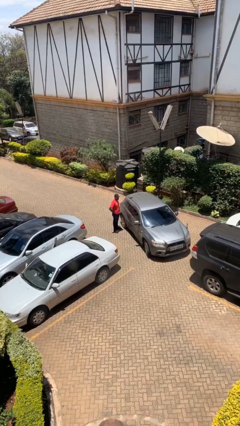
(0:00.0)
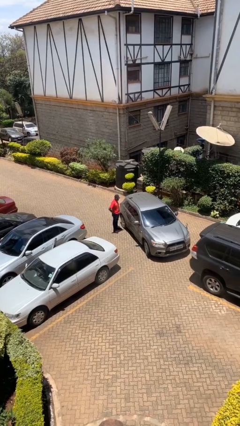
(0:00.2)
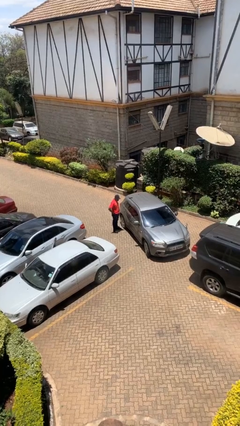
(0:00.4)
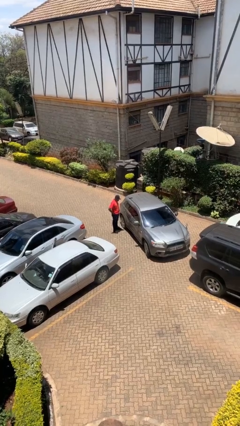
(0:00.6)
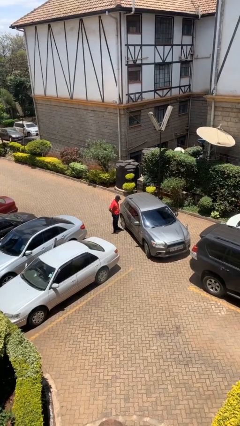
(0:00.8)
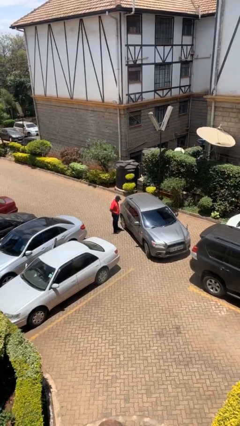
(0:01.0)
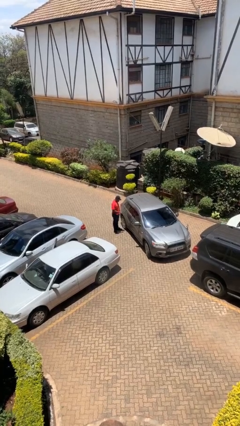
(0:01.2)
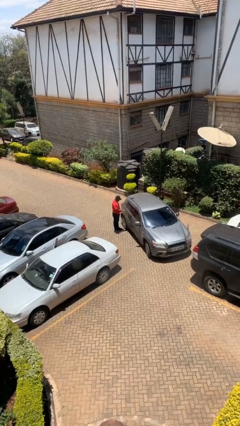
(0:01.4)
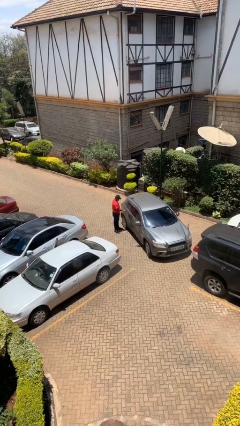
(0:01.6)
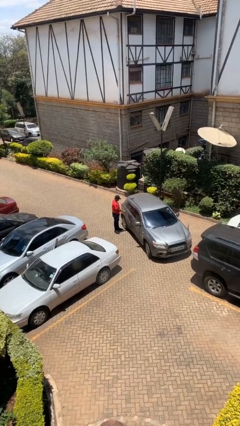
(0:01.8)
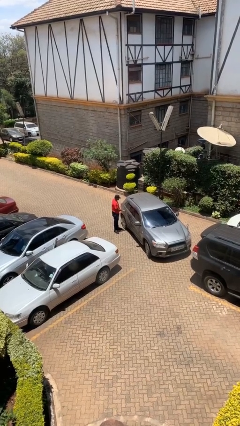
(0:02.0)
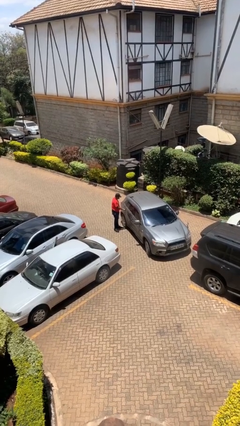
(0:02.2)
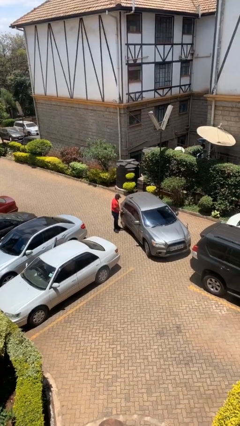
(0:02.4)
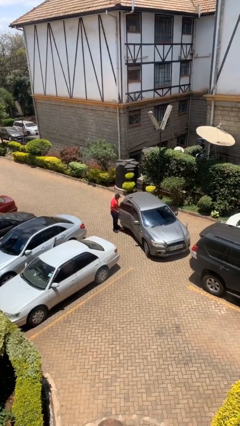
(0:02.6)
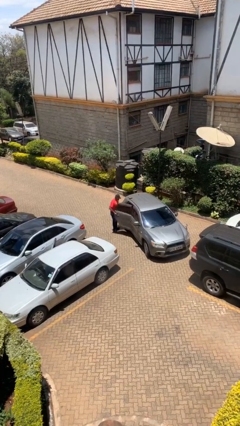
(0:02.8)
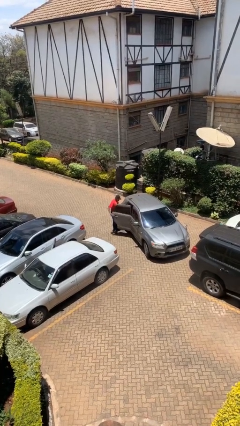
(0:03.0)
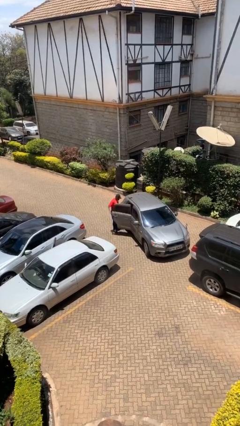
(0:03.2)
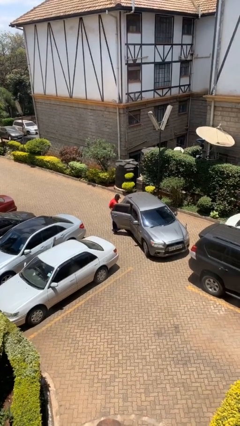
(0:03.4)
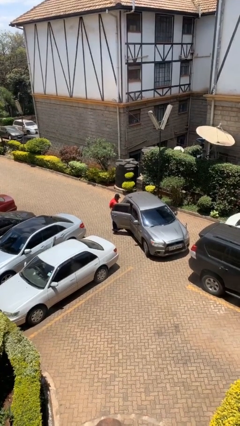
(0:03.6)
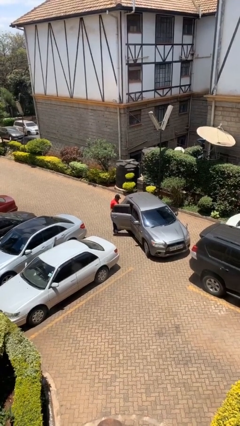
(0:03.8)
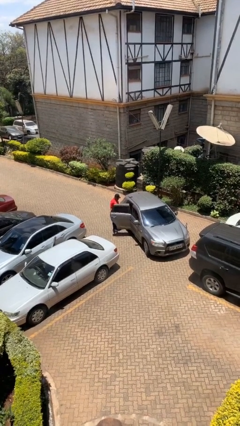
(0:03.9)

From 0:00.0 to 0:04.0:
person opens car door

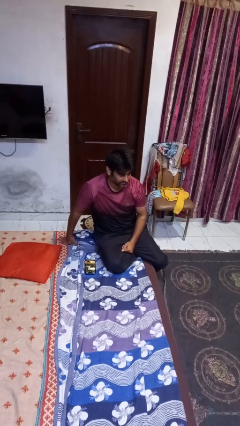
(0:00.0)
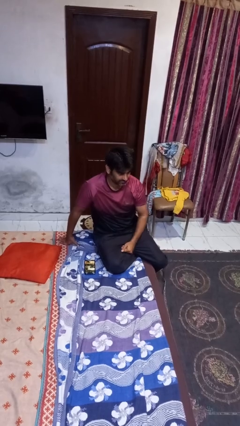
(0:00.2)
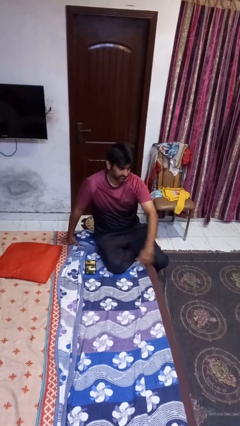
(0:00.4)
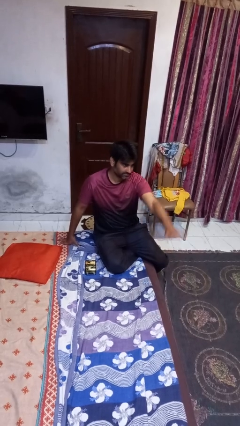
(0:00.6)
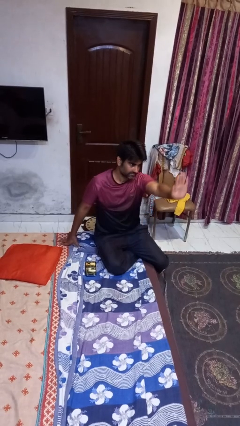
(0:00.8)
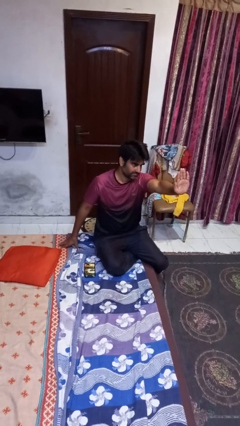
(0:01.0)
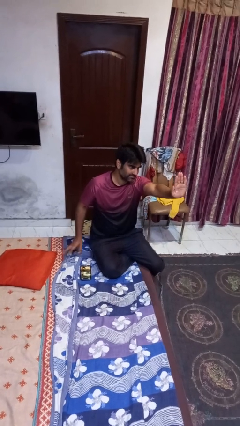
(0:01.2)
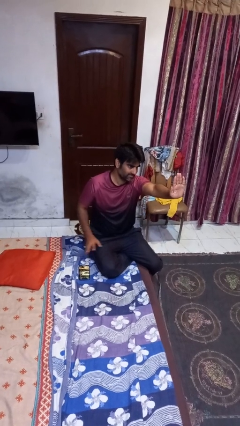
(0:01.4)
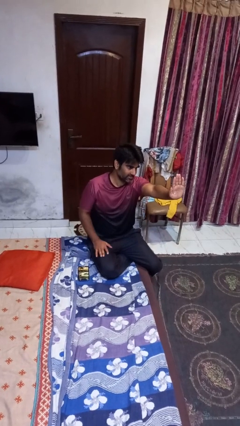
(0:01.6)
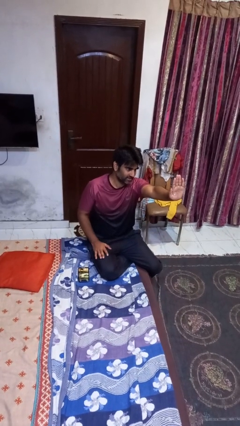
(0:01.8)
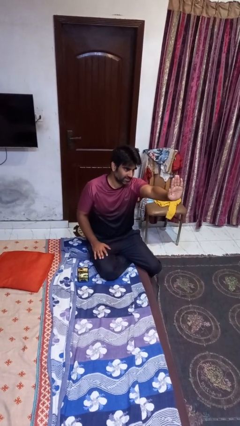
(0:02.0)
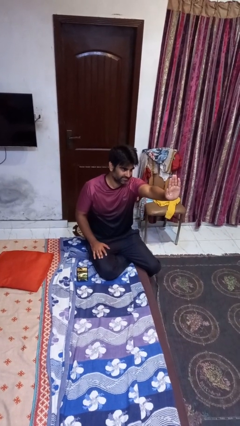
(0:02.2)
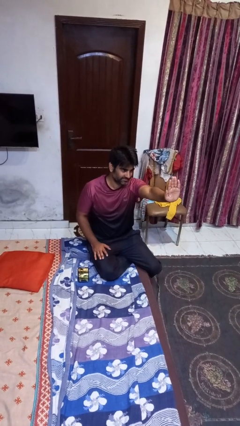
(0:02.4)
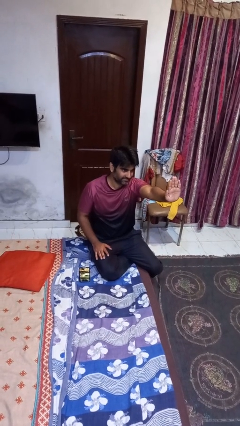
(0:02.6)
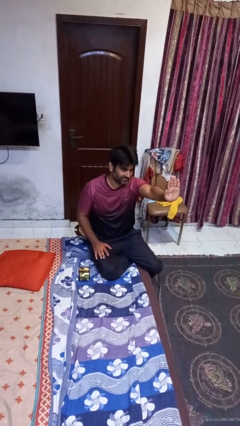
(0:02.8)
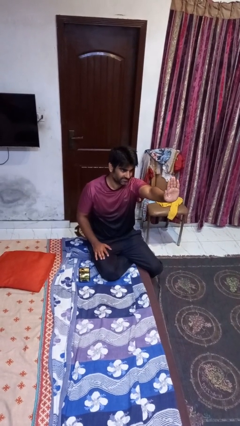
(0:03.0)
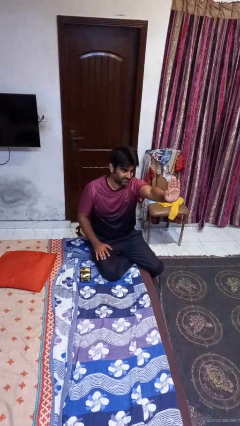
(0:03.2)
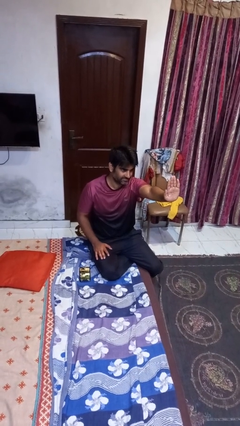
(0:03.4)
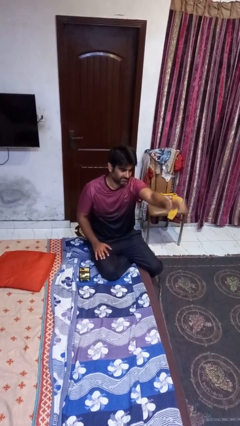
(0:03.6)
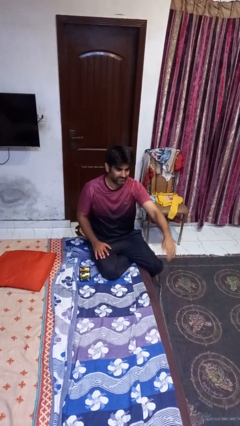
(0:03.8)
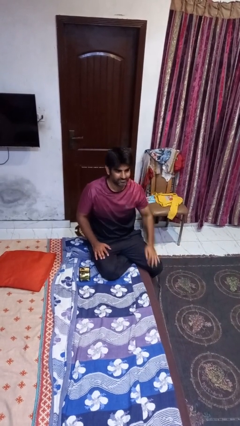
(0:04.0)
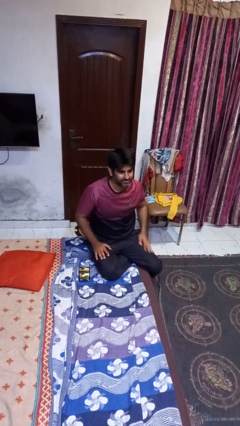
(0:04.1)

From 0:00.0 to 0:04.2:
person gestures stop

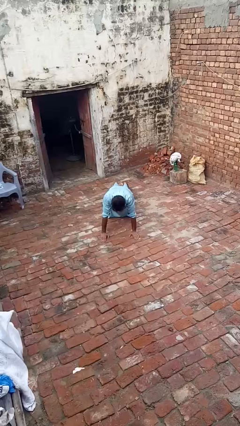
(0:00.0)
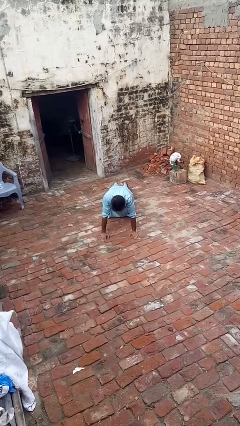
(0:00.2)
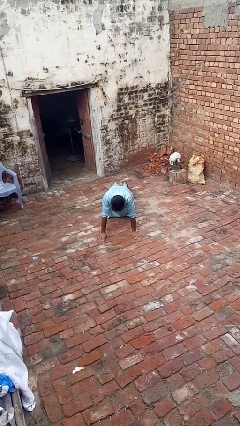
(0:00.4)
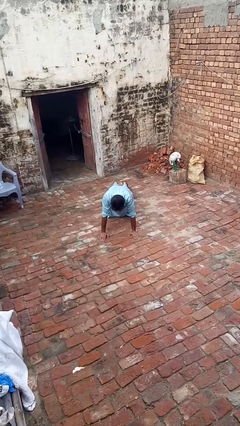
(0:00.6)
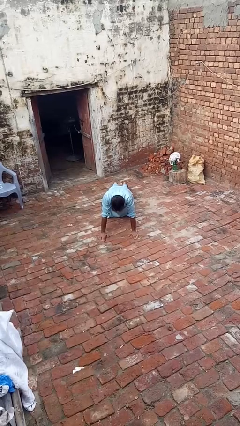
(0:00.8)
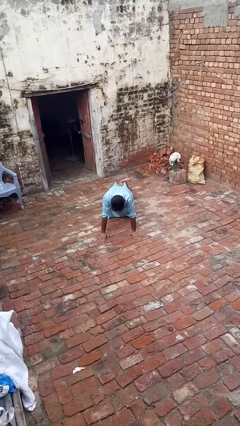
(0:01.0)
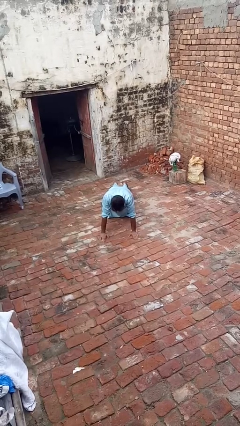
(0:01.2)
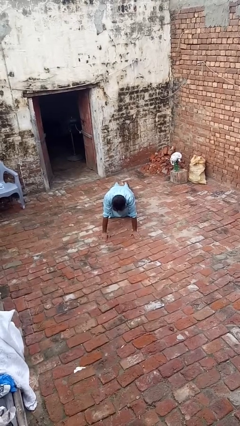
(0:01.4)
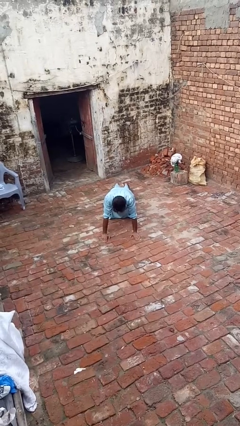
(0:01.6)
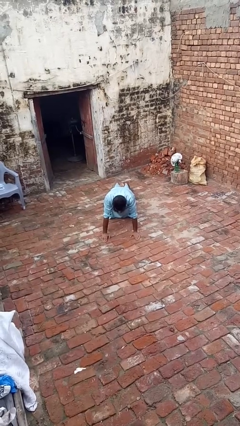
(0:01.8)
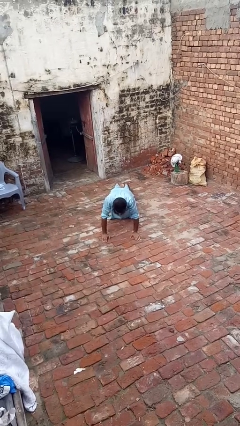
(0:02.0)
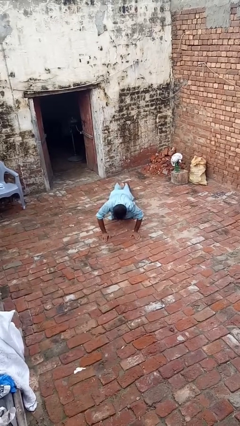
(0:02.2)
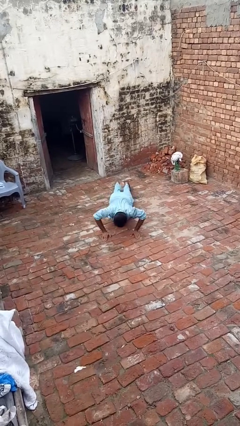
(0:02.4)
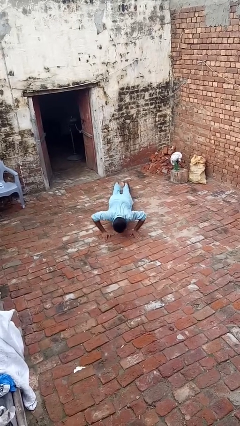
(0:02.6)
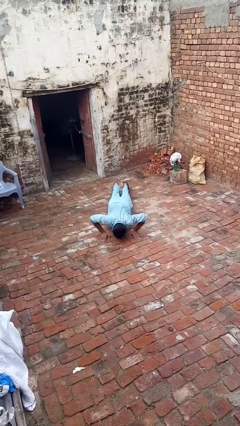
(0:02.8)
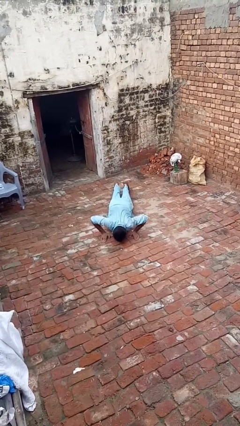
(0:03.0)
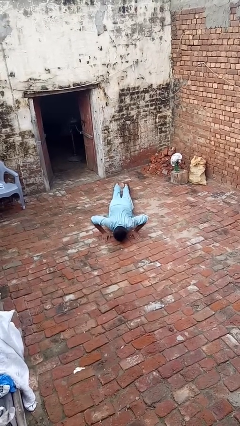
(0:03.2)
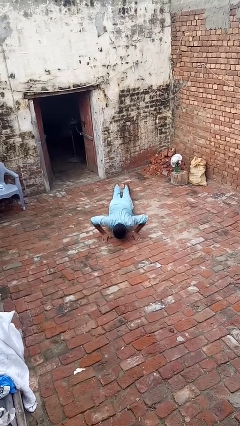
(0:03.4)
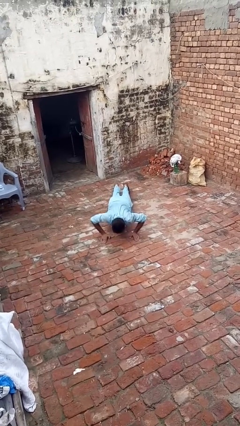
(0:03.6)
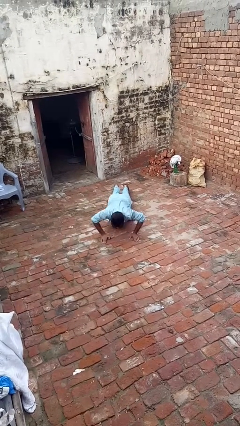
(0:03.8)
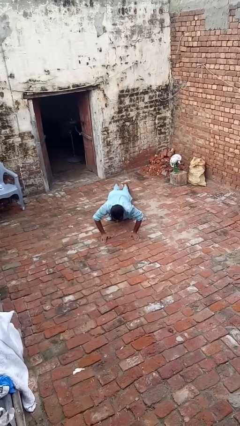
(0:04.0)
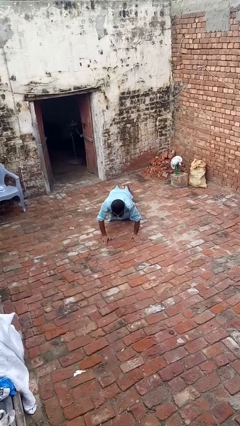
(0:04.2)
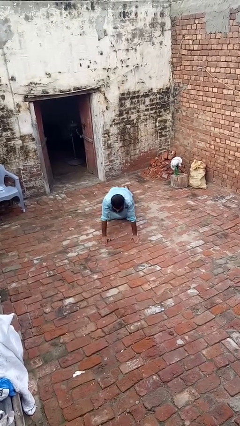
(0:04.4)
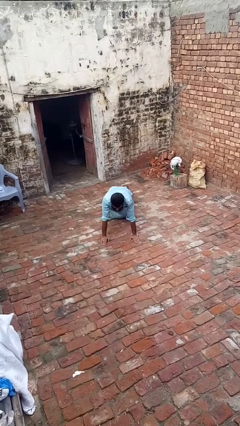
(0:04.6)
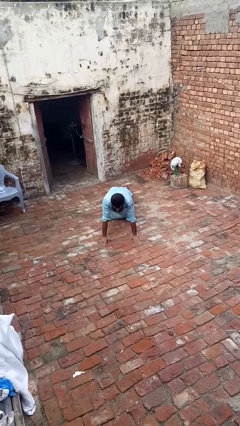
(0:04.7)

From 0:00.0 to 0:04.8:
person exercises with pushup

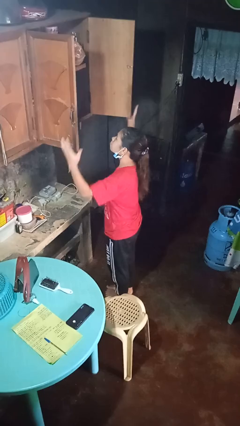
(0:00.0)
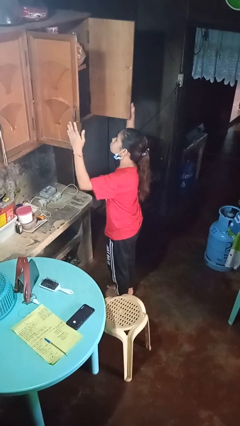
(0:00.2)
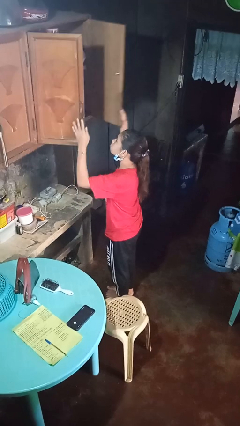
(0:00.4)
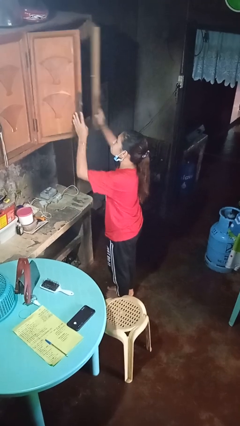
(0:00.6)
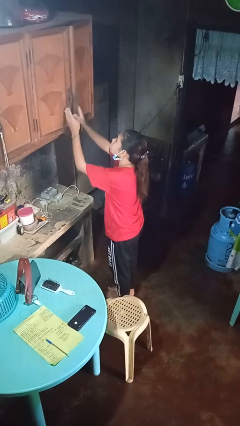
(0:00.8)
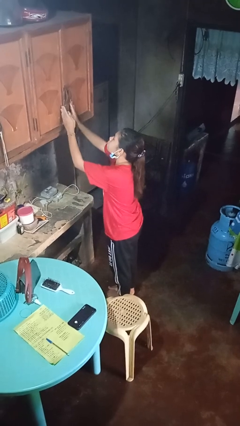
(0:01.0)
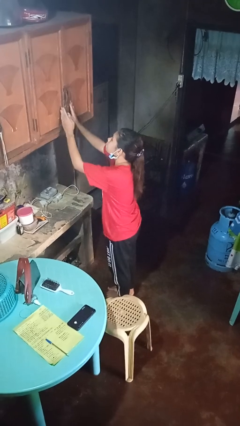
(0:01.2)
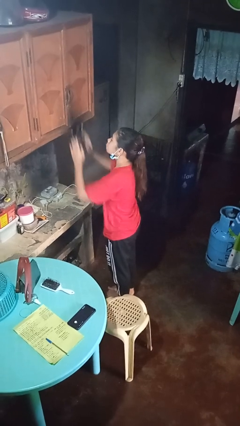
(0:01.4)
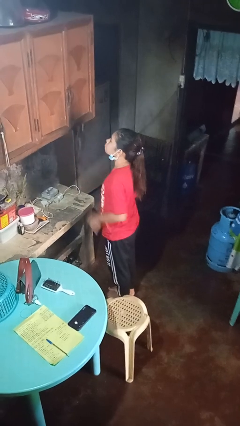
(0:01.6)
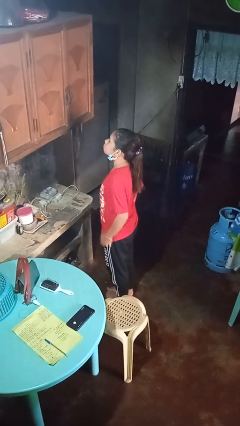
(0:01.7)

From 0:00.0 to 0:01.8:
person closes cabinet

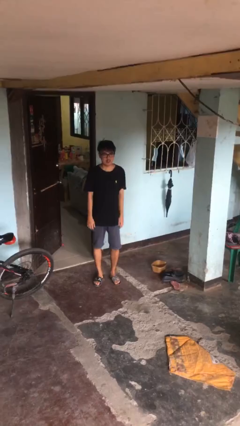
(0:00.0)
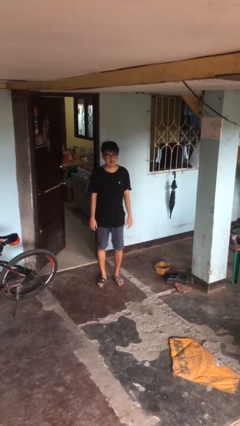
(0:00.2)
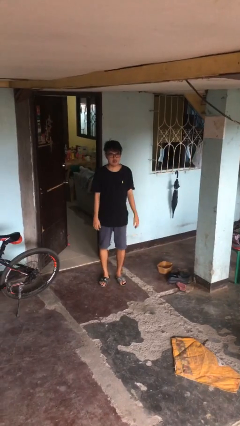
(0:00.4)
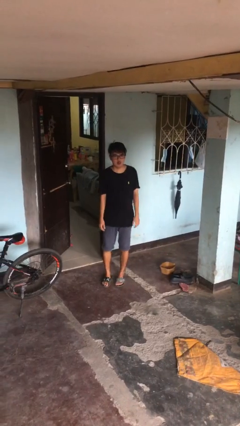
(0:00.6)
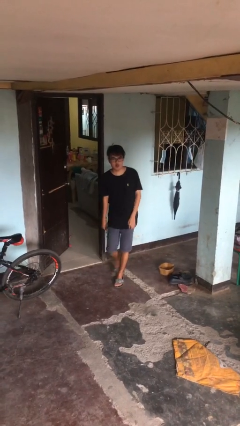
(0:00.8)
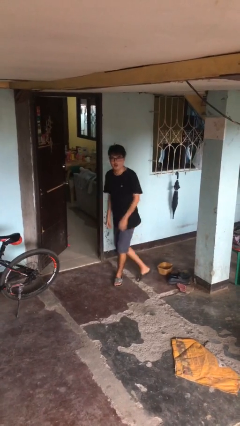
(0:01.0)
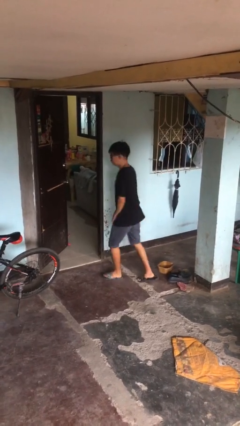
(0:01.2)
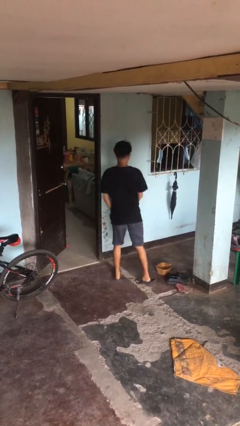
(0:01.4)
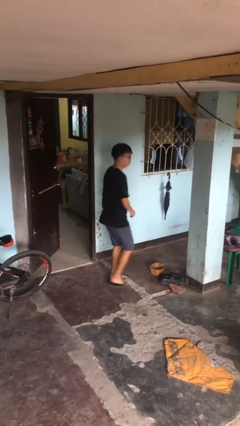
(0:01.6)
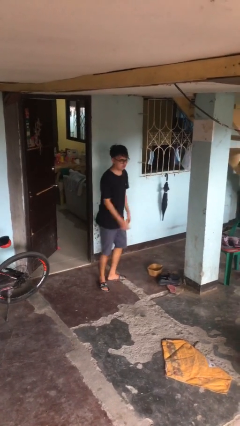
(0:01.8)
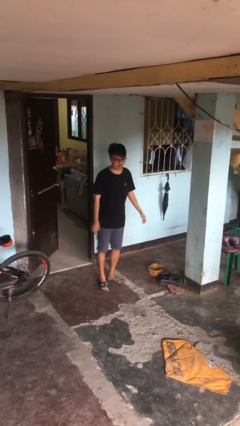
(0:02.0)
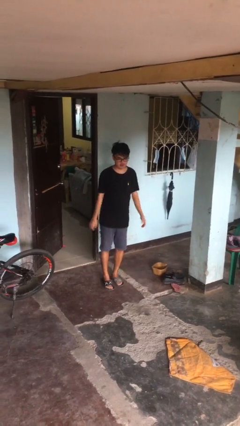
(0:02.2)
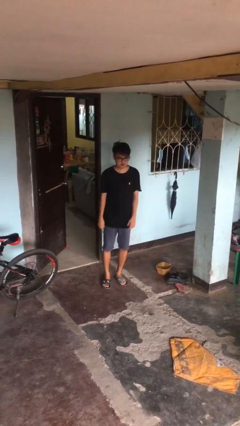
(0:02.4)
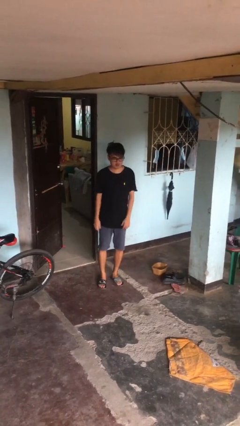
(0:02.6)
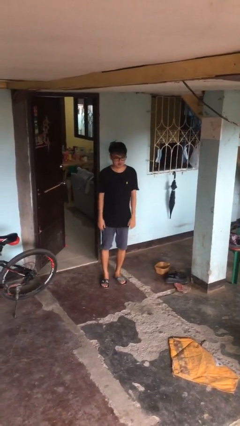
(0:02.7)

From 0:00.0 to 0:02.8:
person twirls

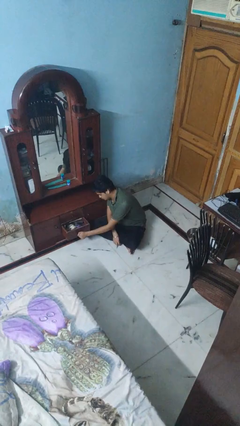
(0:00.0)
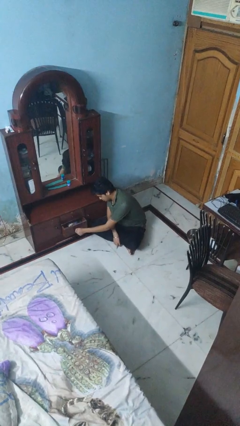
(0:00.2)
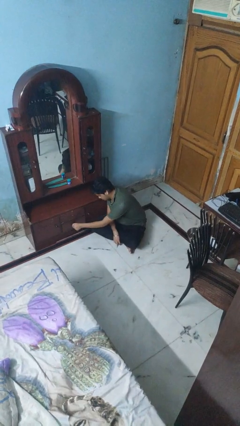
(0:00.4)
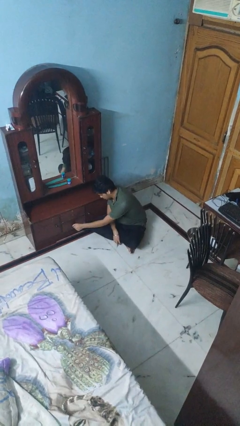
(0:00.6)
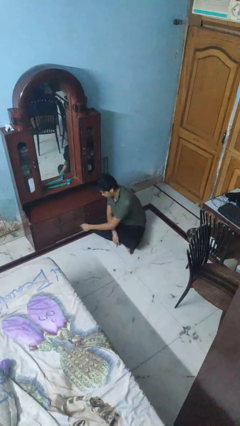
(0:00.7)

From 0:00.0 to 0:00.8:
person closes dresser drawer
